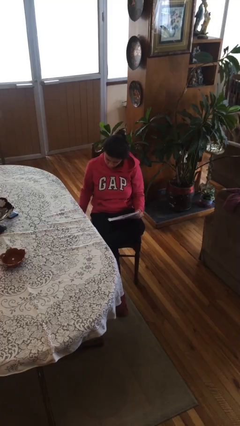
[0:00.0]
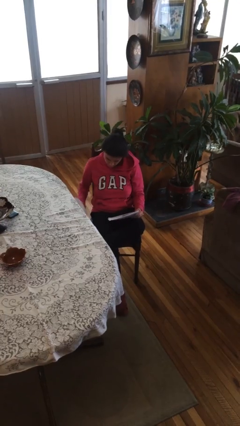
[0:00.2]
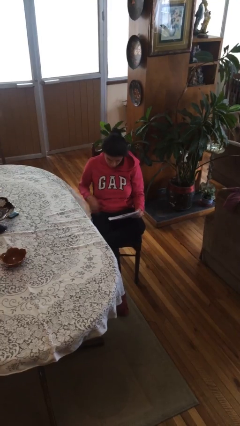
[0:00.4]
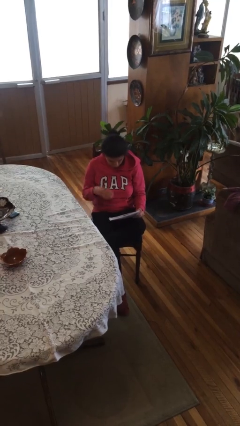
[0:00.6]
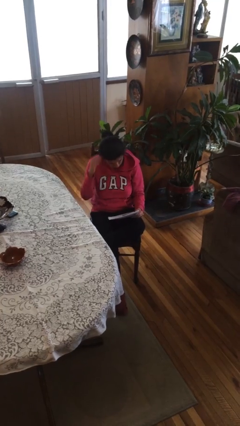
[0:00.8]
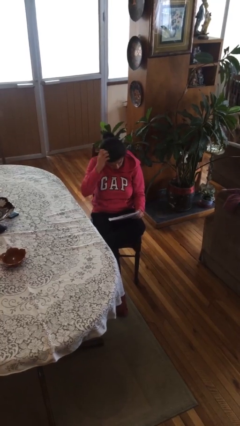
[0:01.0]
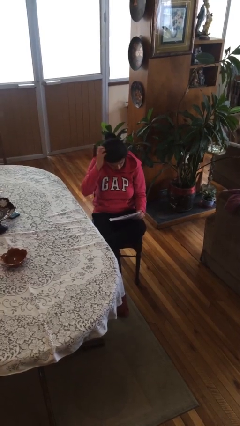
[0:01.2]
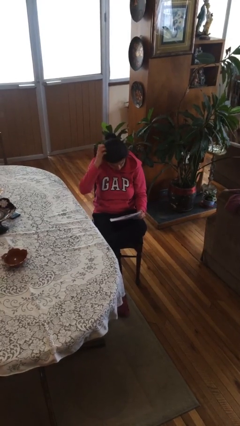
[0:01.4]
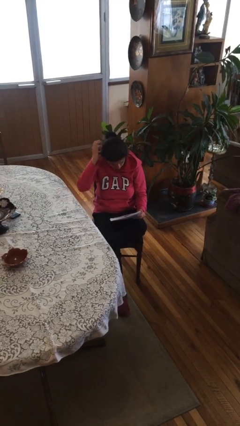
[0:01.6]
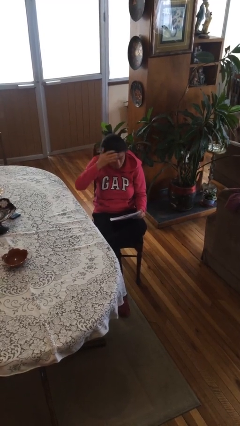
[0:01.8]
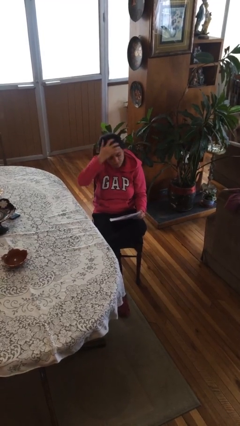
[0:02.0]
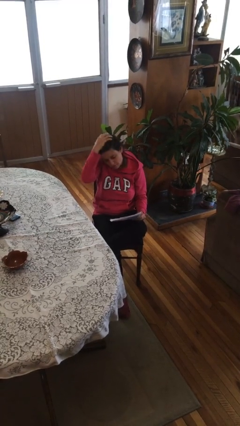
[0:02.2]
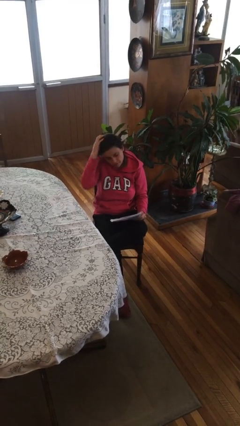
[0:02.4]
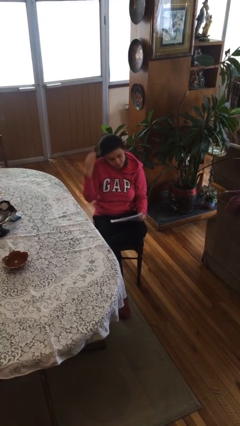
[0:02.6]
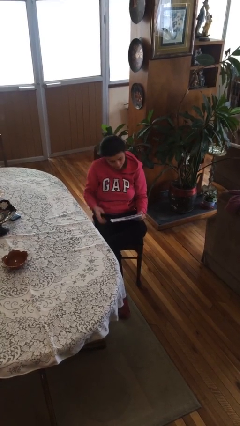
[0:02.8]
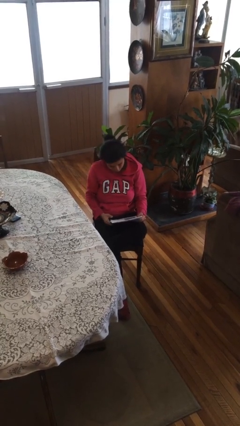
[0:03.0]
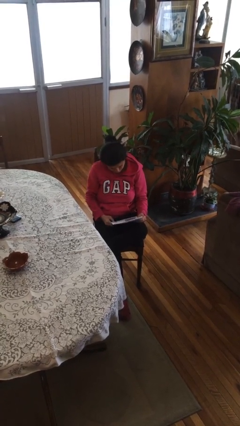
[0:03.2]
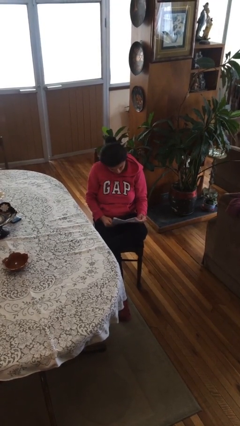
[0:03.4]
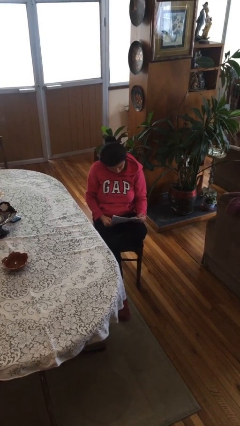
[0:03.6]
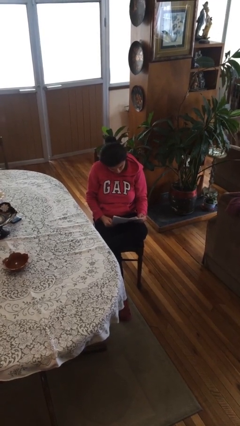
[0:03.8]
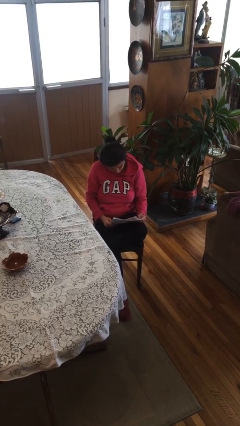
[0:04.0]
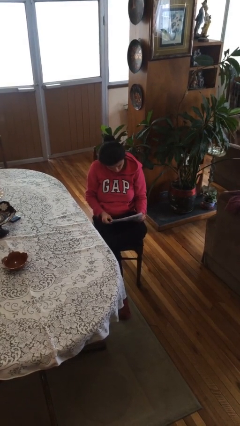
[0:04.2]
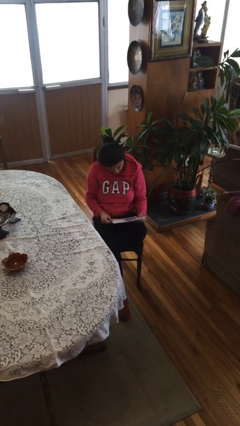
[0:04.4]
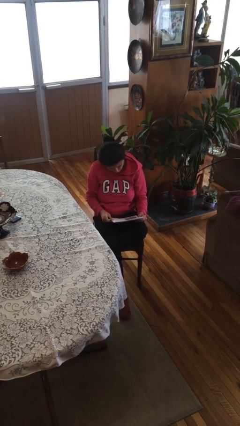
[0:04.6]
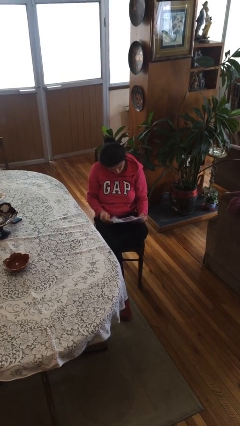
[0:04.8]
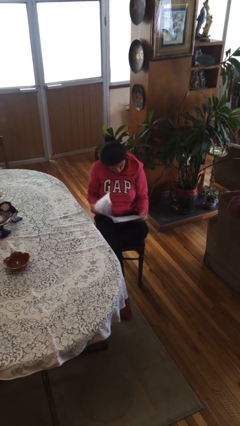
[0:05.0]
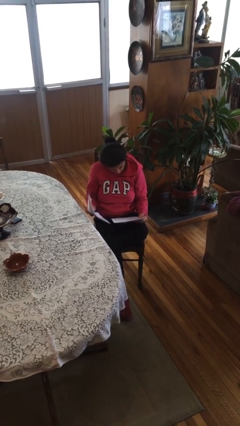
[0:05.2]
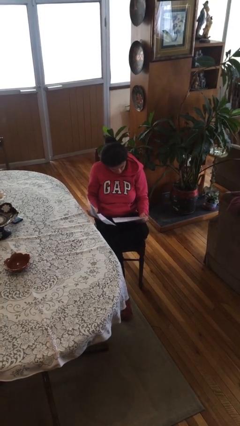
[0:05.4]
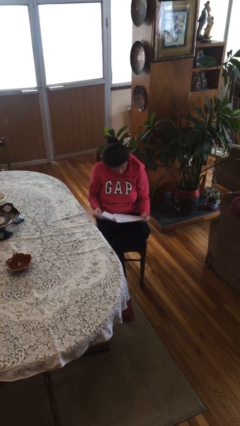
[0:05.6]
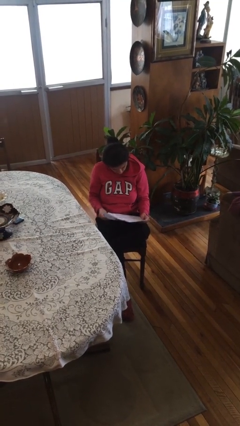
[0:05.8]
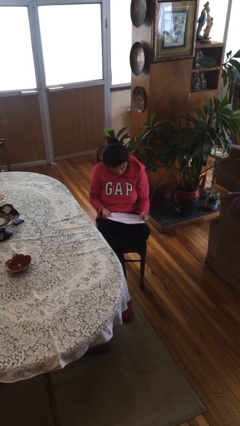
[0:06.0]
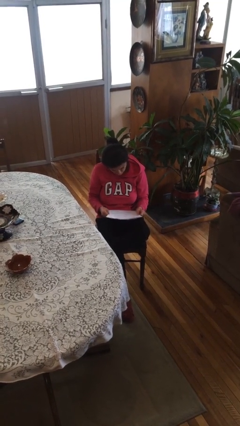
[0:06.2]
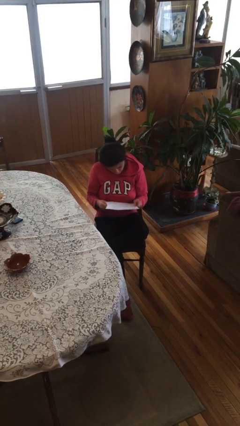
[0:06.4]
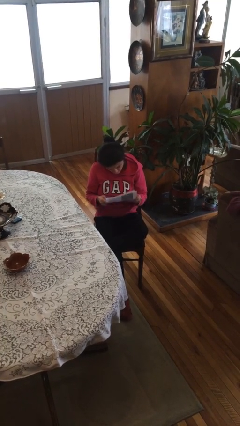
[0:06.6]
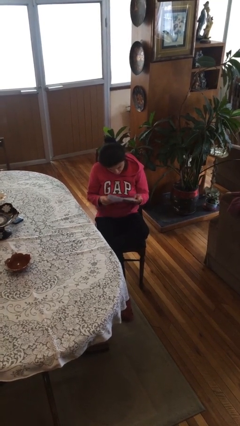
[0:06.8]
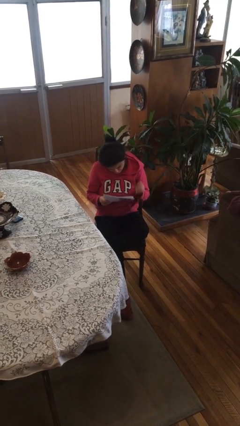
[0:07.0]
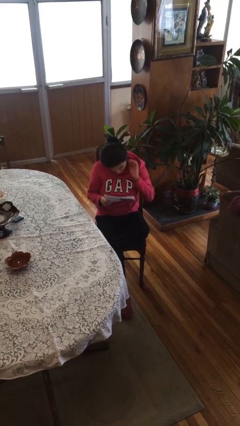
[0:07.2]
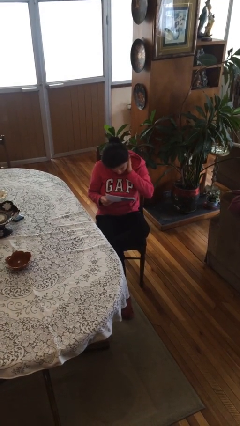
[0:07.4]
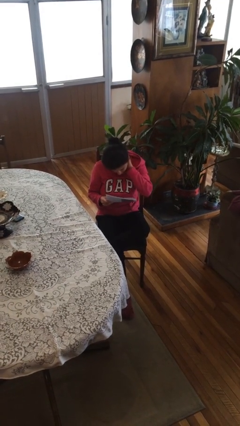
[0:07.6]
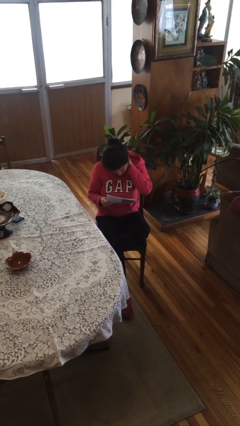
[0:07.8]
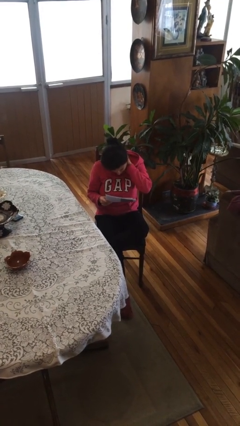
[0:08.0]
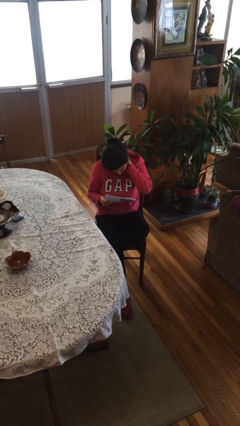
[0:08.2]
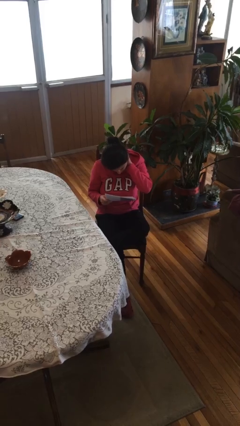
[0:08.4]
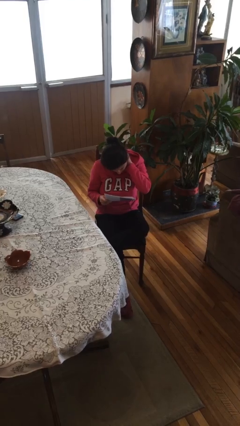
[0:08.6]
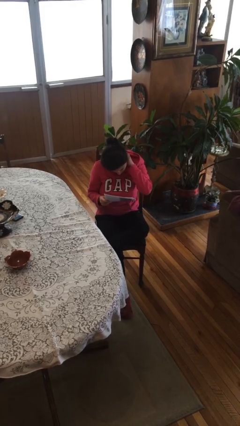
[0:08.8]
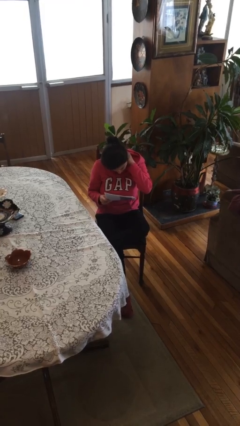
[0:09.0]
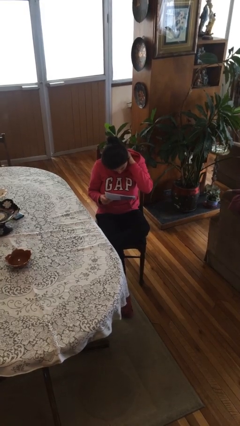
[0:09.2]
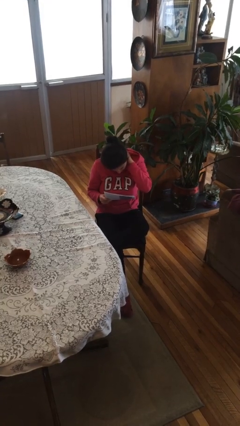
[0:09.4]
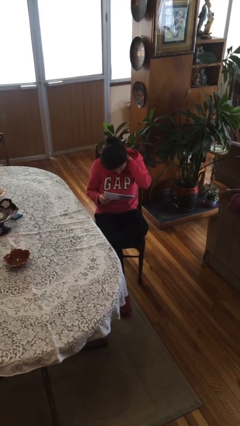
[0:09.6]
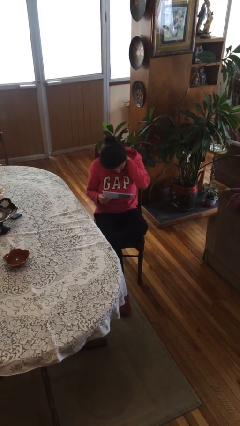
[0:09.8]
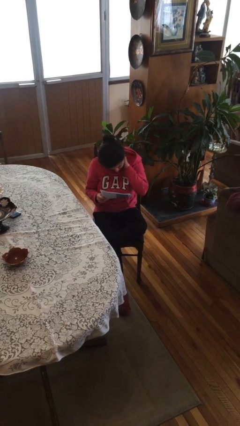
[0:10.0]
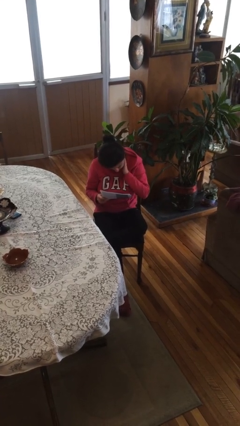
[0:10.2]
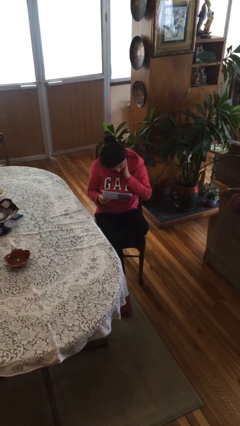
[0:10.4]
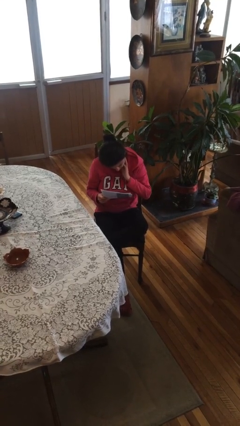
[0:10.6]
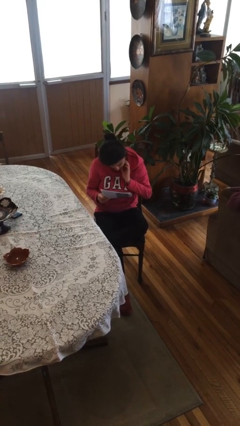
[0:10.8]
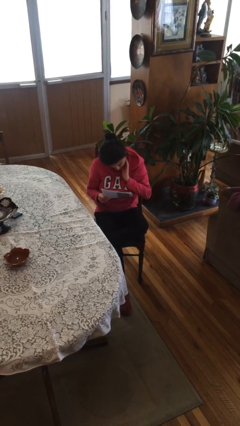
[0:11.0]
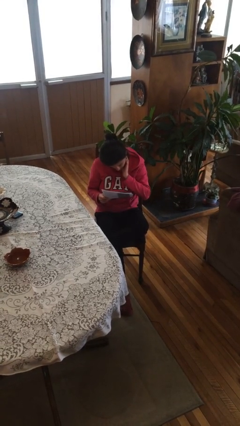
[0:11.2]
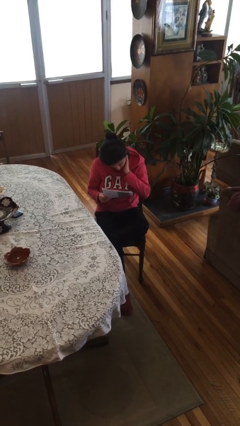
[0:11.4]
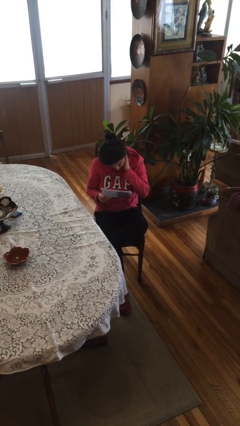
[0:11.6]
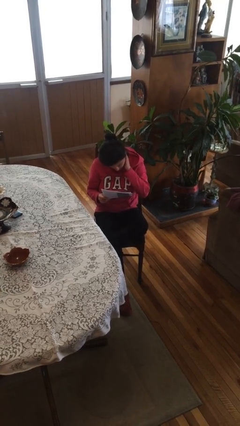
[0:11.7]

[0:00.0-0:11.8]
person reads document

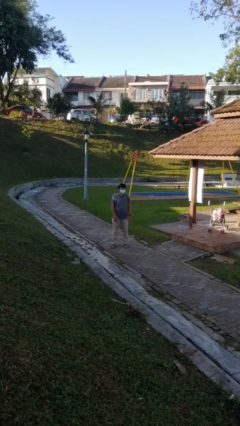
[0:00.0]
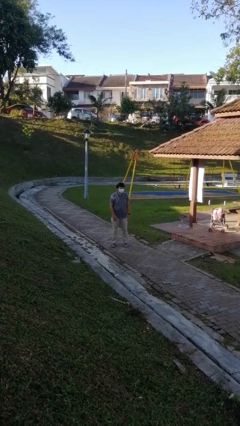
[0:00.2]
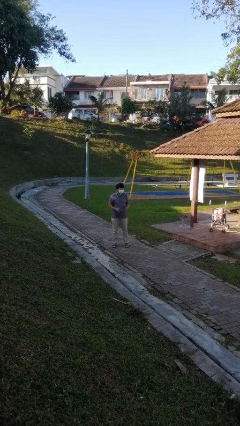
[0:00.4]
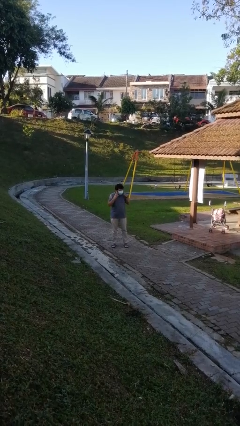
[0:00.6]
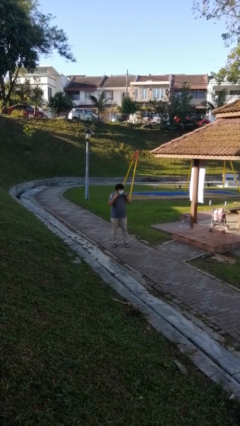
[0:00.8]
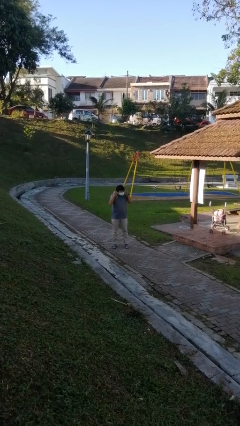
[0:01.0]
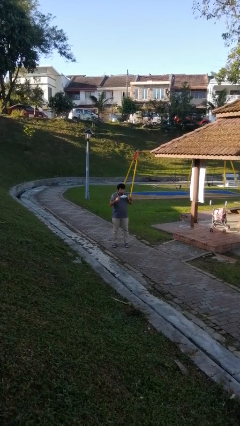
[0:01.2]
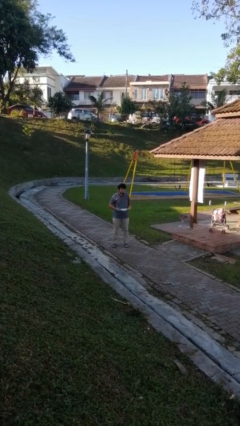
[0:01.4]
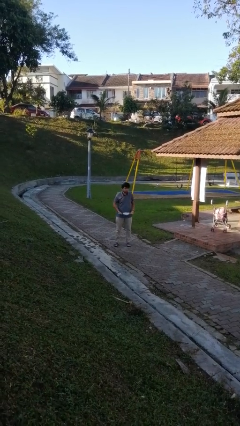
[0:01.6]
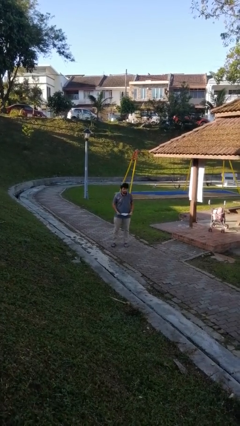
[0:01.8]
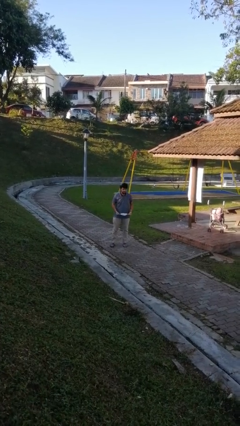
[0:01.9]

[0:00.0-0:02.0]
person takes off facemask

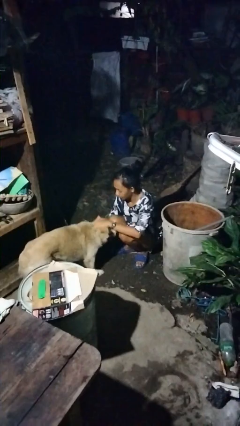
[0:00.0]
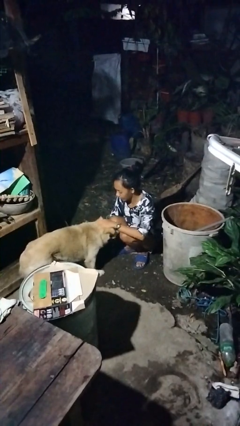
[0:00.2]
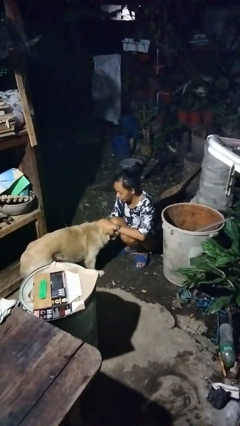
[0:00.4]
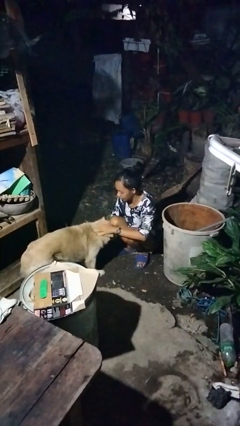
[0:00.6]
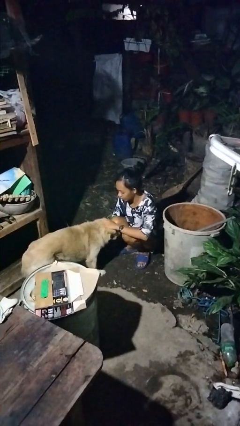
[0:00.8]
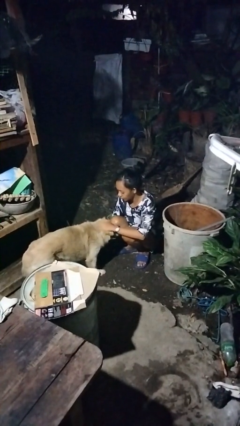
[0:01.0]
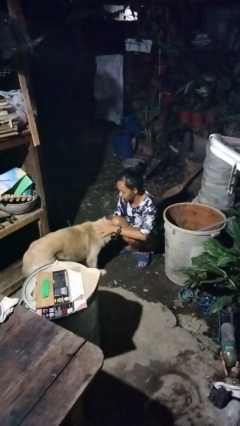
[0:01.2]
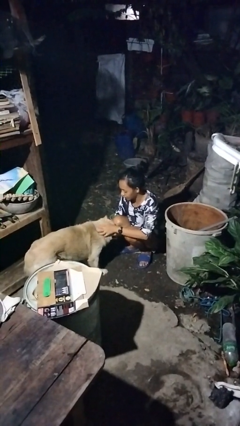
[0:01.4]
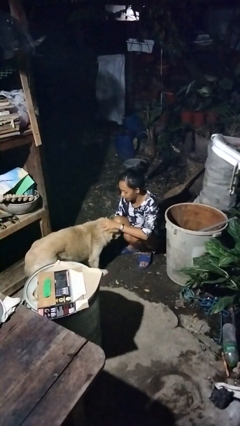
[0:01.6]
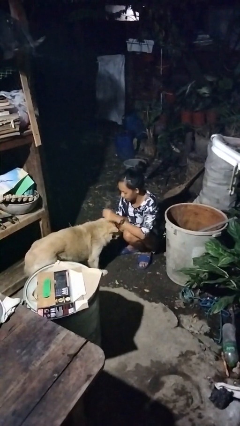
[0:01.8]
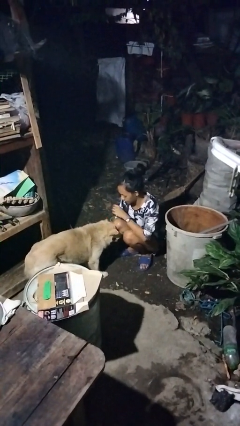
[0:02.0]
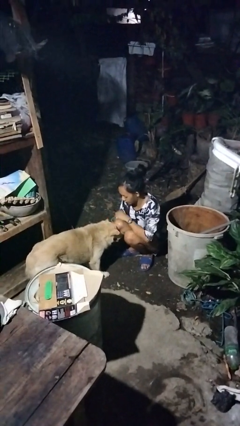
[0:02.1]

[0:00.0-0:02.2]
person pets dog

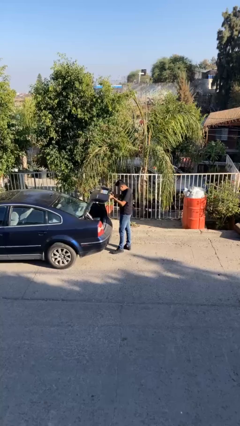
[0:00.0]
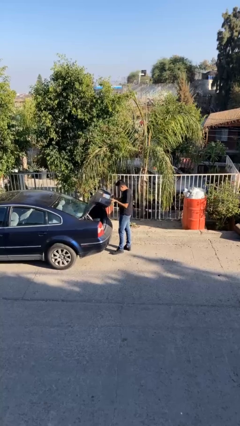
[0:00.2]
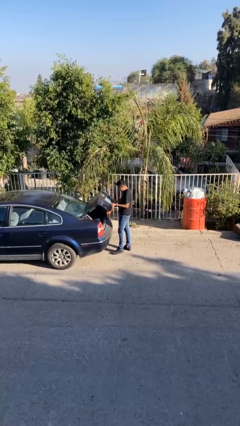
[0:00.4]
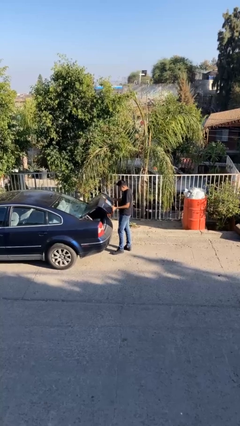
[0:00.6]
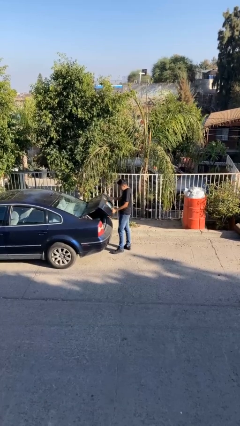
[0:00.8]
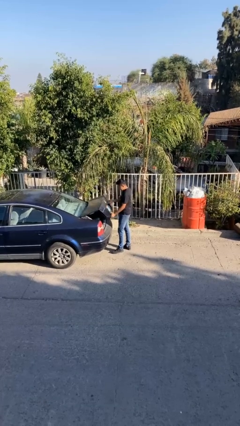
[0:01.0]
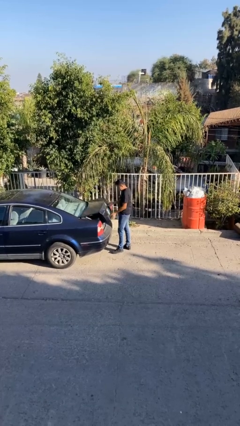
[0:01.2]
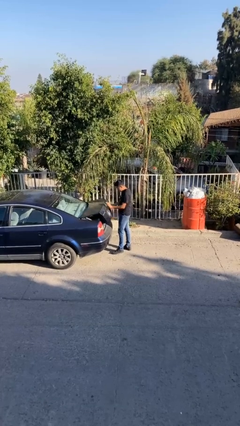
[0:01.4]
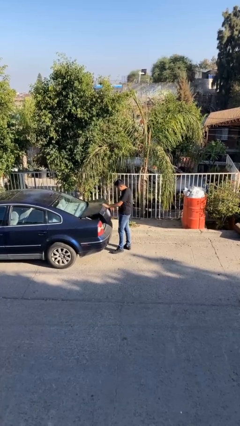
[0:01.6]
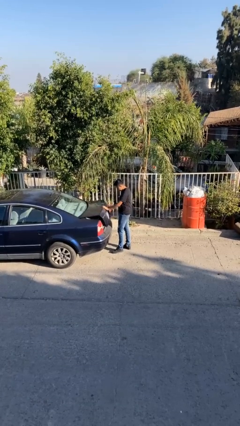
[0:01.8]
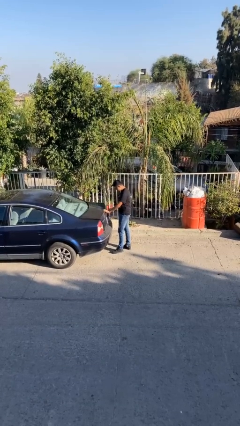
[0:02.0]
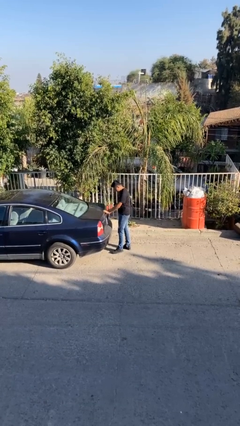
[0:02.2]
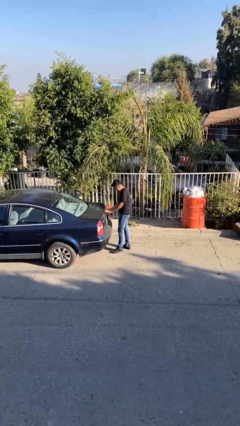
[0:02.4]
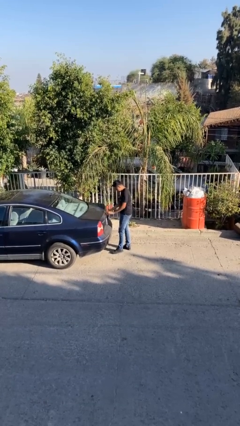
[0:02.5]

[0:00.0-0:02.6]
person closes car trunk
